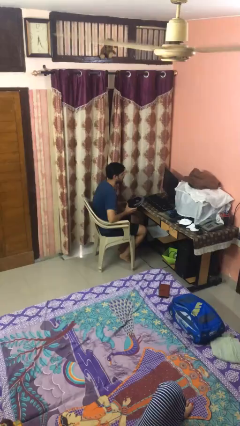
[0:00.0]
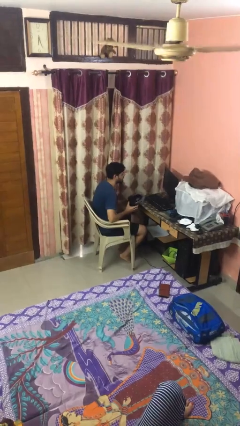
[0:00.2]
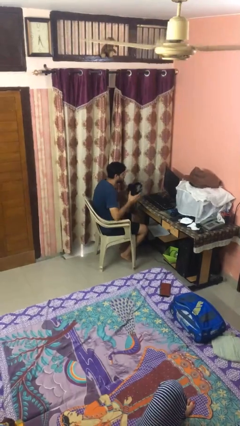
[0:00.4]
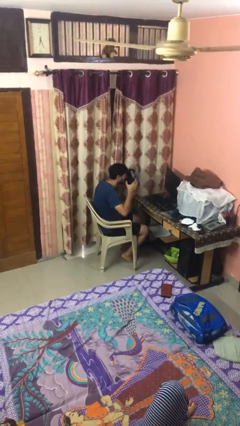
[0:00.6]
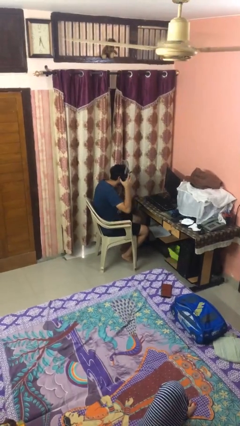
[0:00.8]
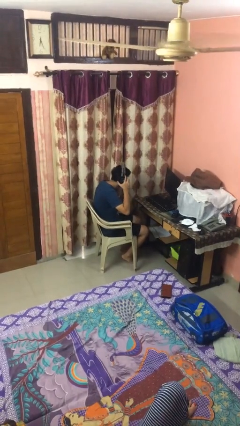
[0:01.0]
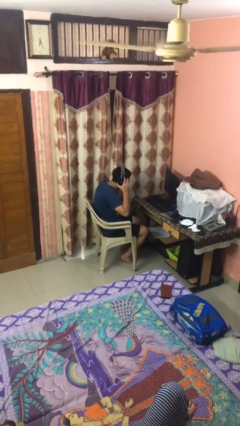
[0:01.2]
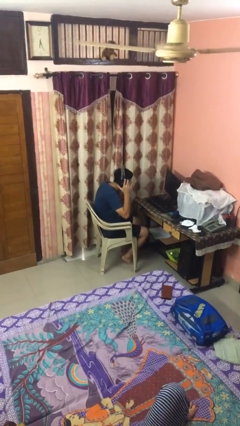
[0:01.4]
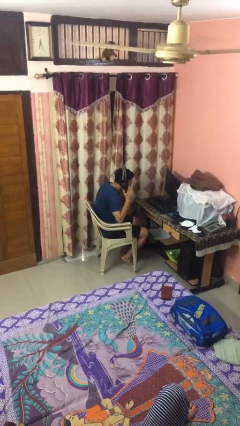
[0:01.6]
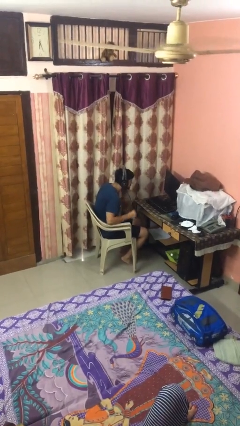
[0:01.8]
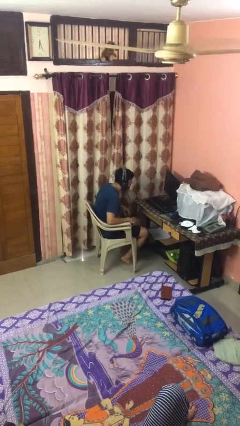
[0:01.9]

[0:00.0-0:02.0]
person puts on headphones

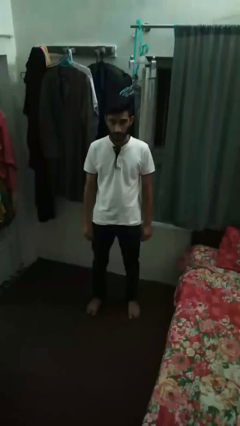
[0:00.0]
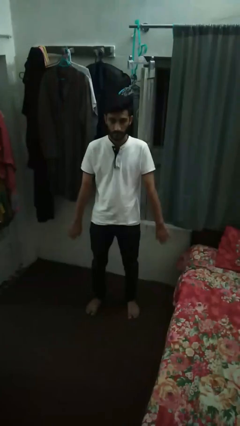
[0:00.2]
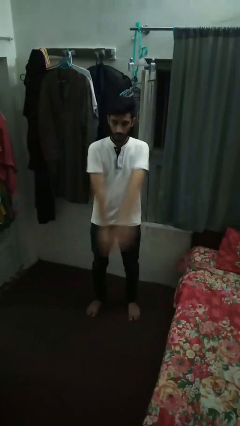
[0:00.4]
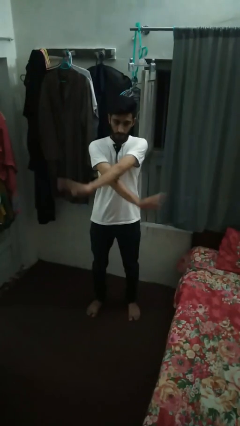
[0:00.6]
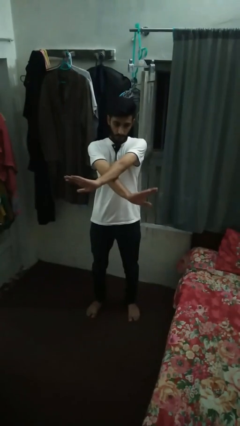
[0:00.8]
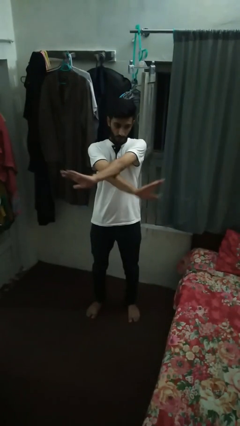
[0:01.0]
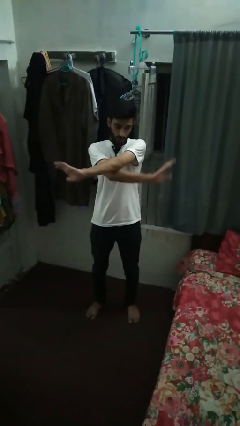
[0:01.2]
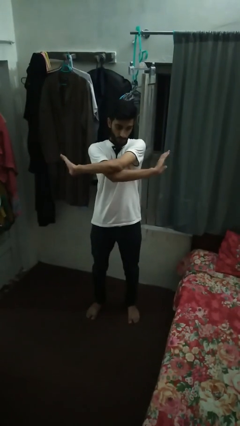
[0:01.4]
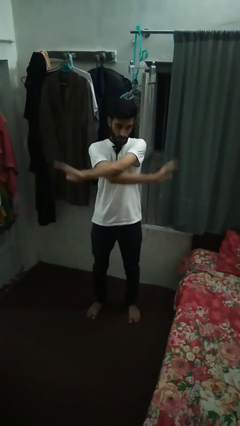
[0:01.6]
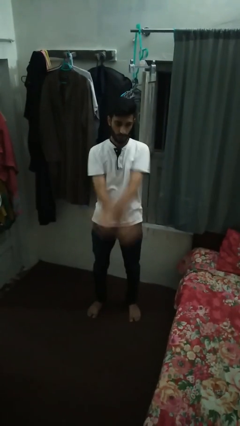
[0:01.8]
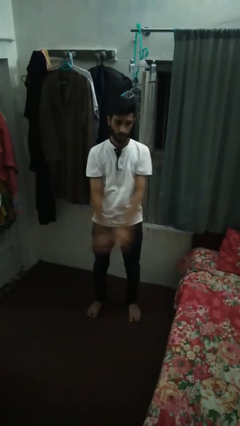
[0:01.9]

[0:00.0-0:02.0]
person gestures arms x

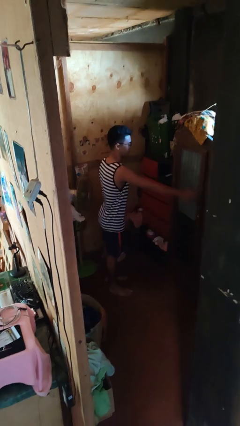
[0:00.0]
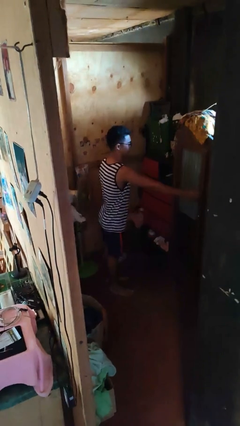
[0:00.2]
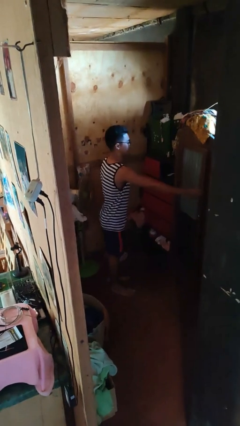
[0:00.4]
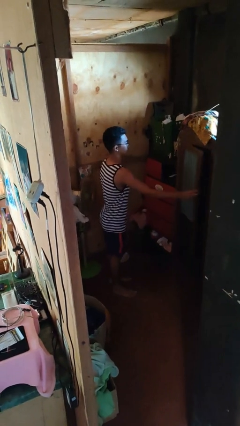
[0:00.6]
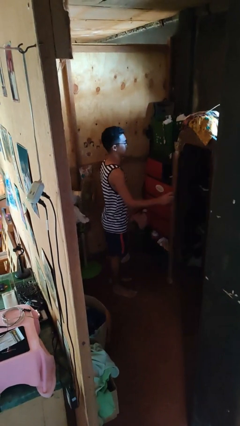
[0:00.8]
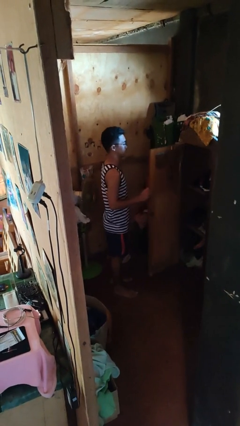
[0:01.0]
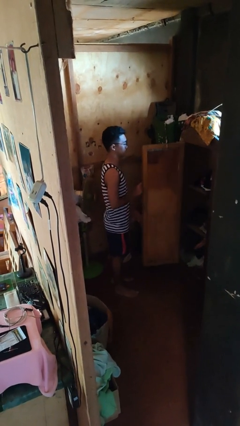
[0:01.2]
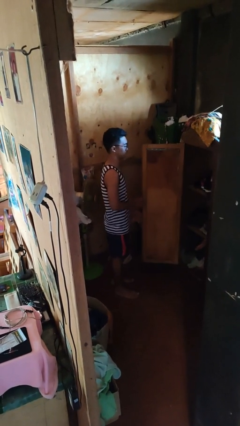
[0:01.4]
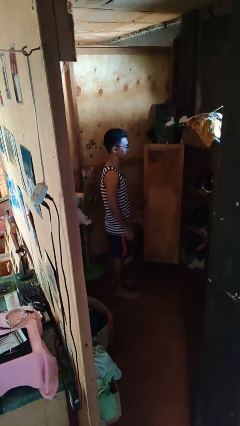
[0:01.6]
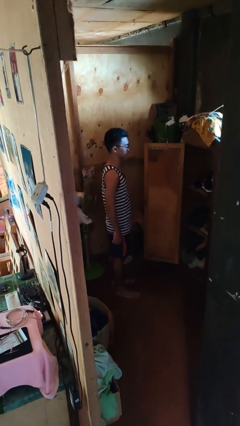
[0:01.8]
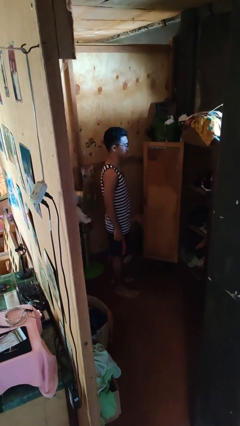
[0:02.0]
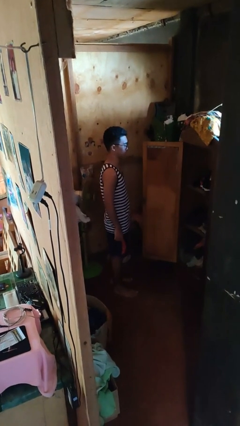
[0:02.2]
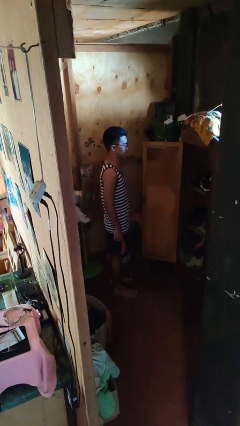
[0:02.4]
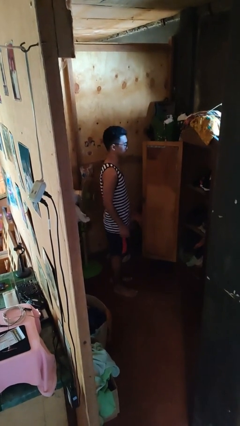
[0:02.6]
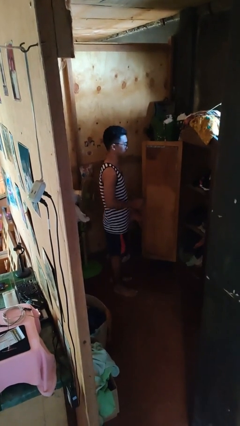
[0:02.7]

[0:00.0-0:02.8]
person opens closet door

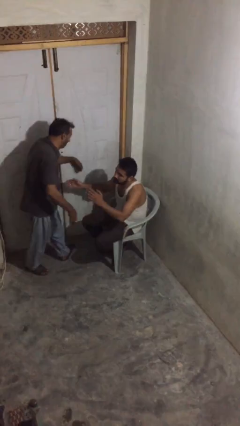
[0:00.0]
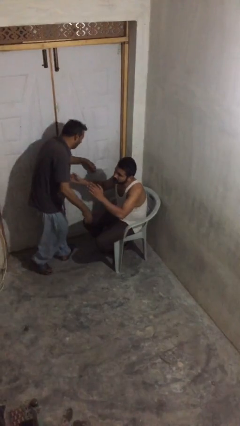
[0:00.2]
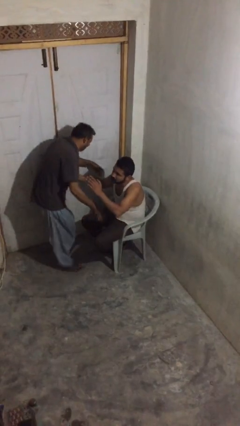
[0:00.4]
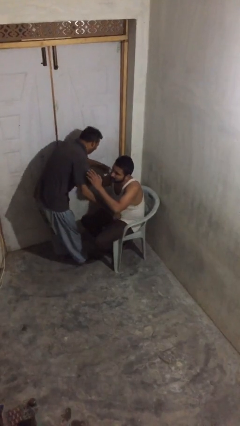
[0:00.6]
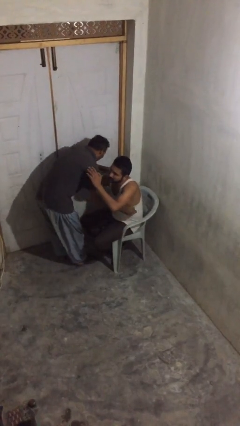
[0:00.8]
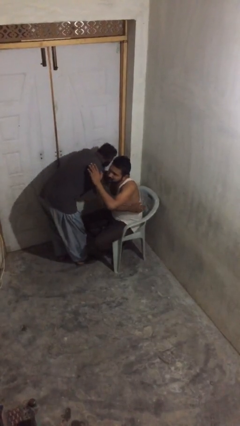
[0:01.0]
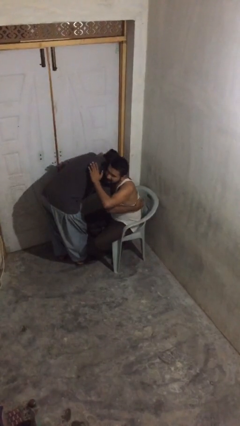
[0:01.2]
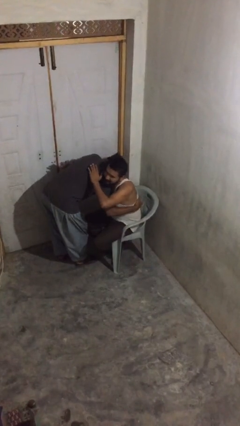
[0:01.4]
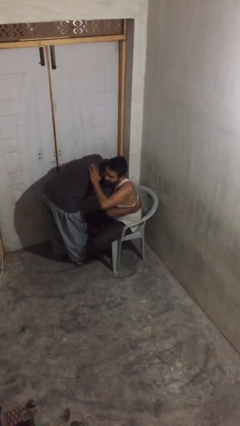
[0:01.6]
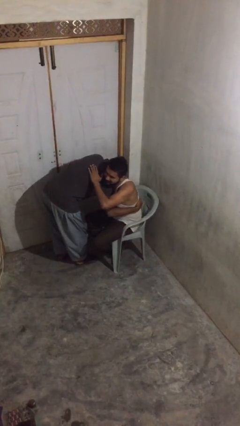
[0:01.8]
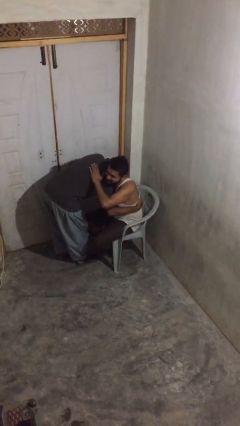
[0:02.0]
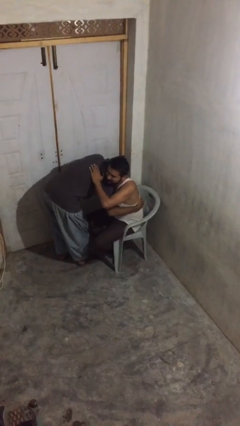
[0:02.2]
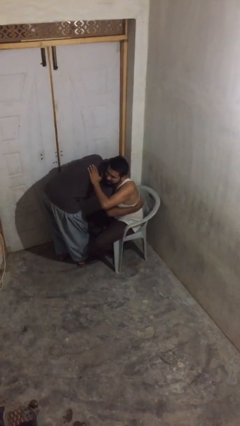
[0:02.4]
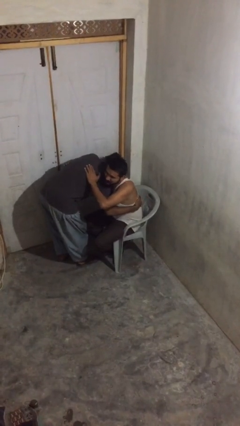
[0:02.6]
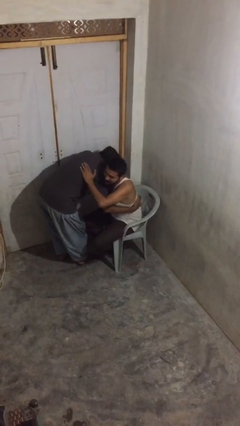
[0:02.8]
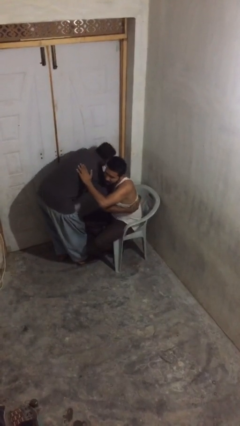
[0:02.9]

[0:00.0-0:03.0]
person embraces person

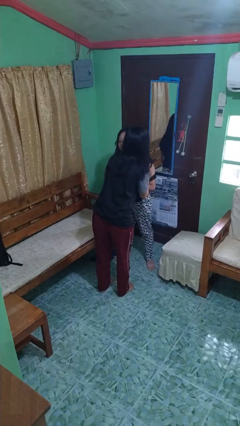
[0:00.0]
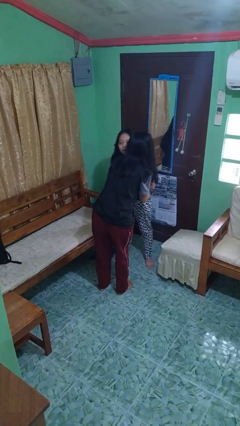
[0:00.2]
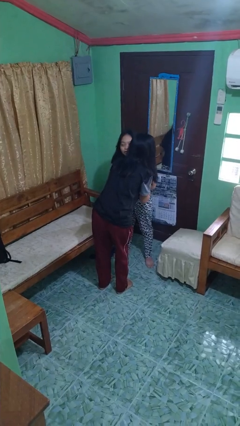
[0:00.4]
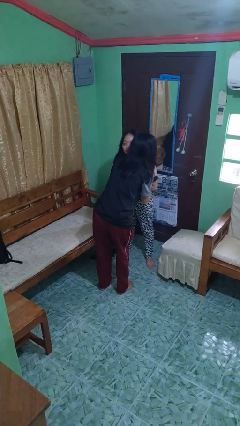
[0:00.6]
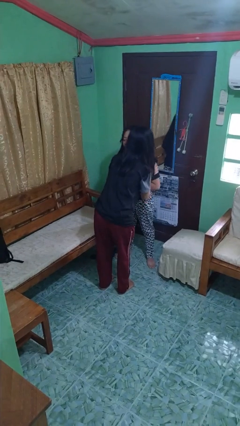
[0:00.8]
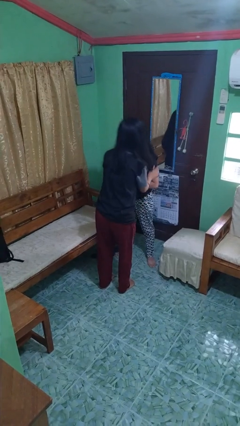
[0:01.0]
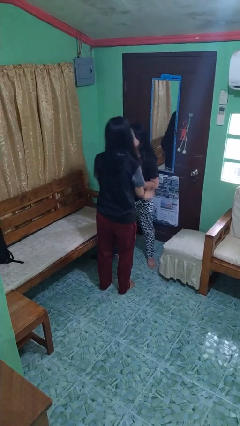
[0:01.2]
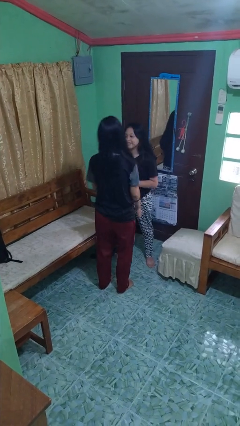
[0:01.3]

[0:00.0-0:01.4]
person kisses cheek of person

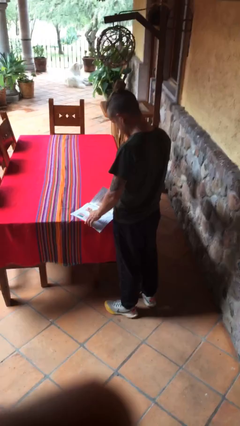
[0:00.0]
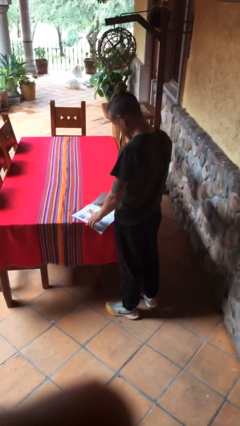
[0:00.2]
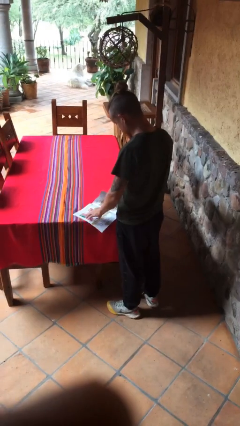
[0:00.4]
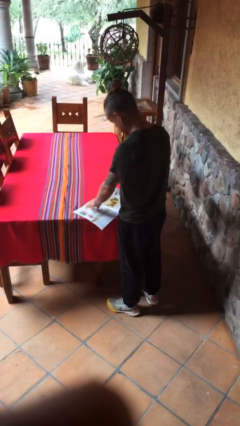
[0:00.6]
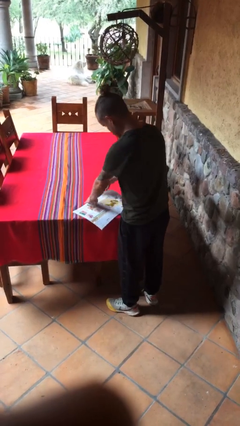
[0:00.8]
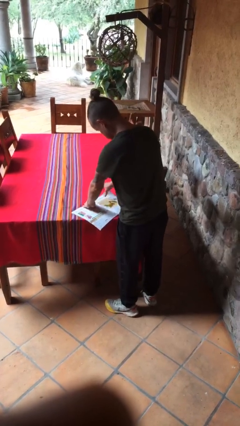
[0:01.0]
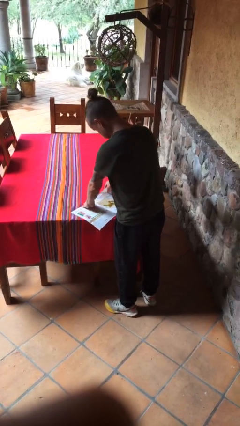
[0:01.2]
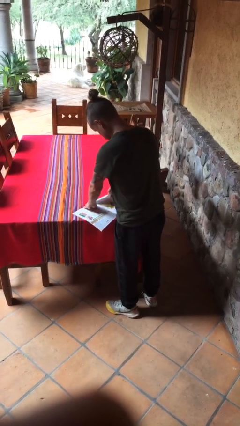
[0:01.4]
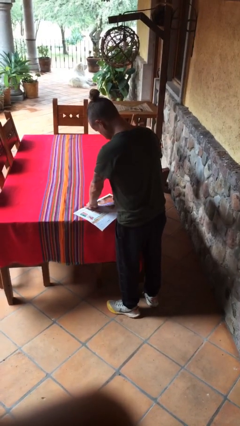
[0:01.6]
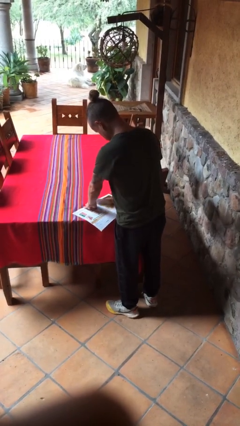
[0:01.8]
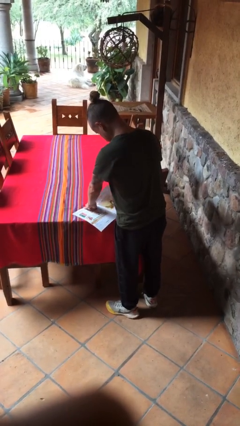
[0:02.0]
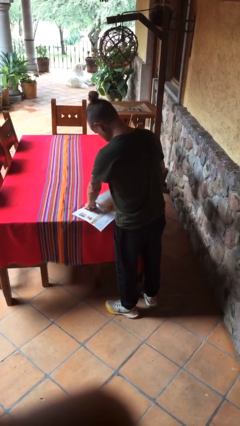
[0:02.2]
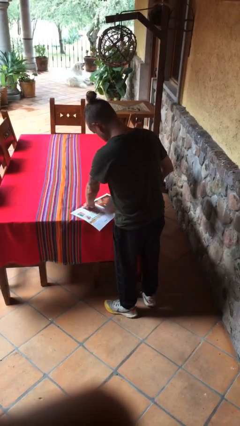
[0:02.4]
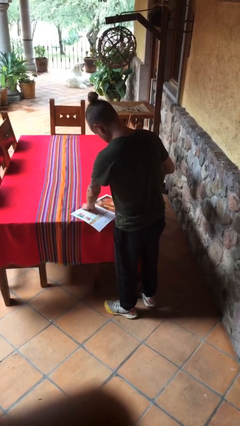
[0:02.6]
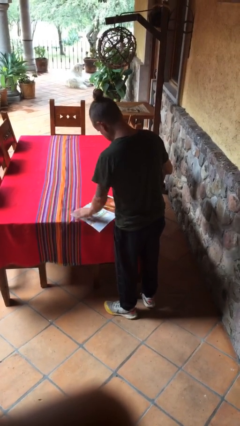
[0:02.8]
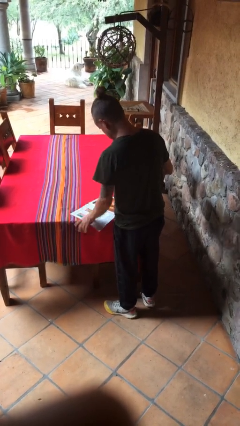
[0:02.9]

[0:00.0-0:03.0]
person tears paper

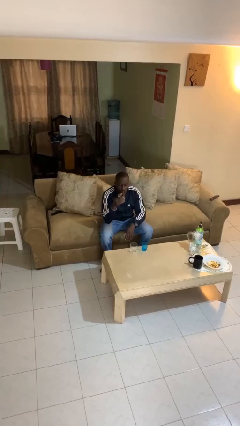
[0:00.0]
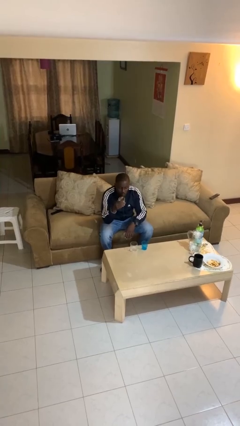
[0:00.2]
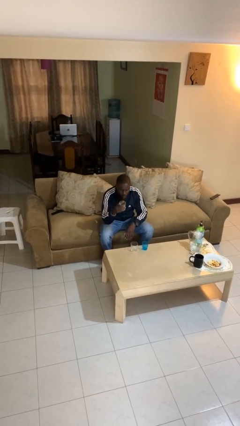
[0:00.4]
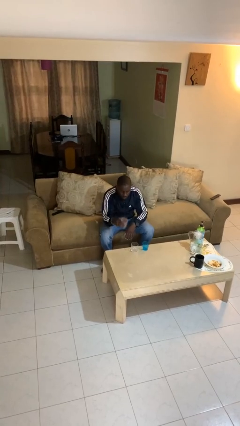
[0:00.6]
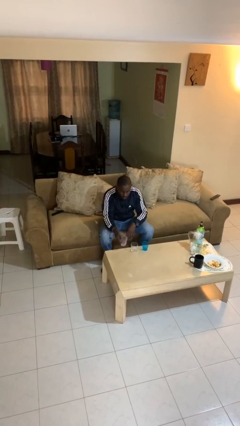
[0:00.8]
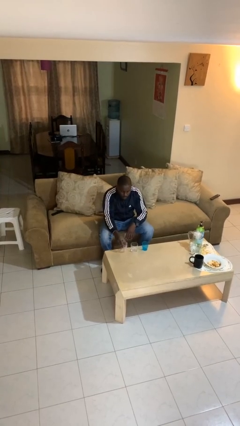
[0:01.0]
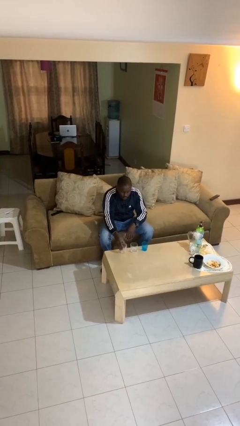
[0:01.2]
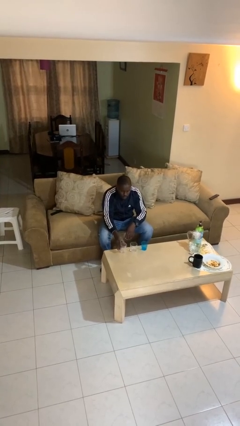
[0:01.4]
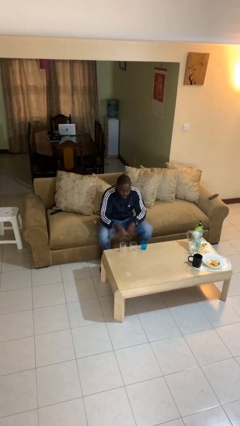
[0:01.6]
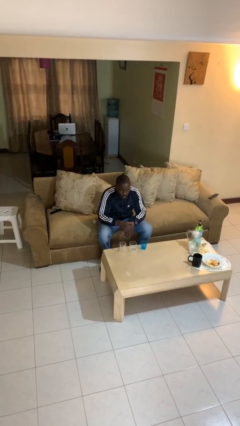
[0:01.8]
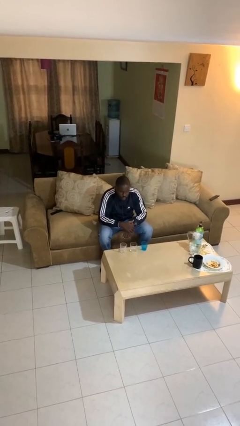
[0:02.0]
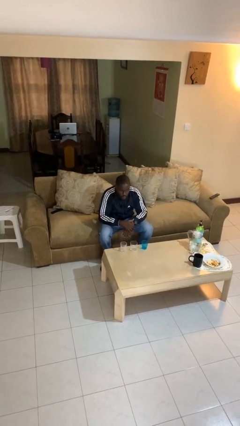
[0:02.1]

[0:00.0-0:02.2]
person puts down object on table

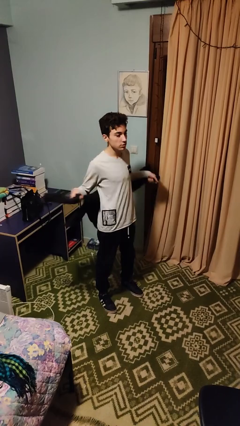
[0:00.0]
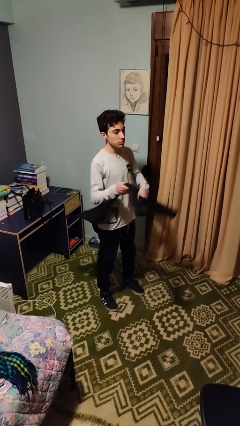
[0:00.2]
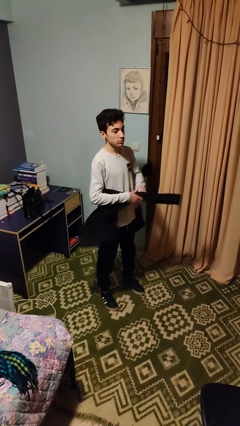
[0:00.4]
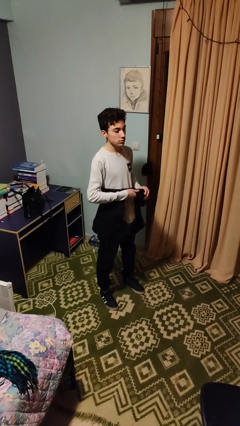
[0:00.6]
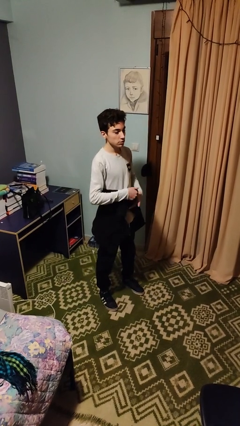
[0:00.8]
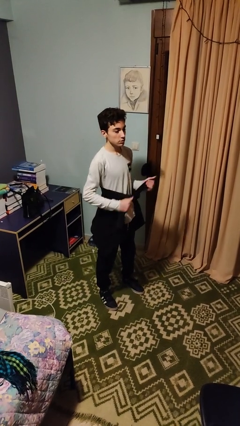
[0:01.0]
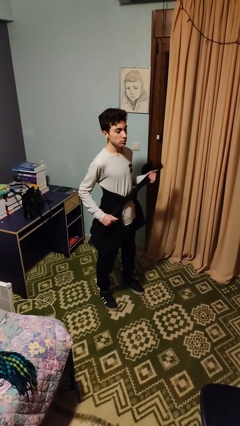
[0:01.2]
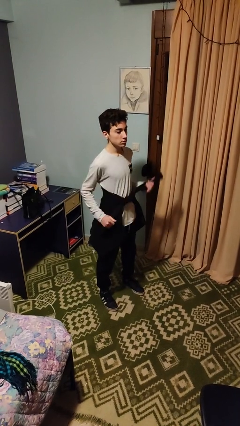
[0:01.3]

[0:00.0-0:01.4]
person ties jacket around waist
